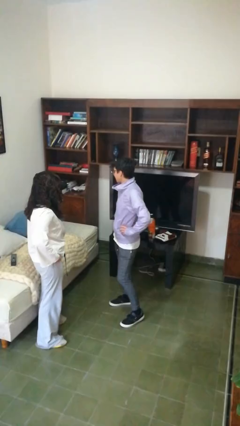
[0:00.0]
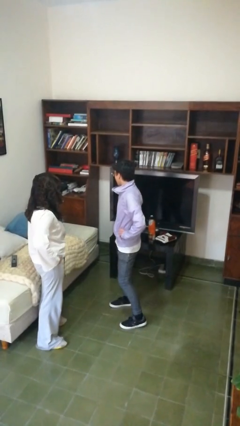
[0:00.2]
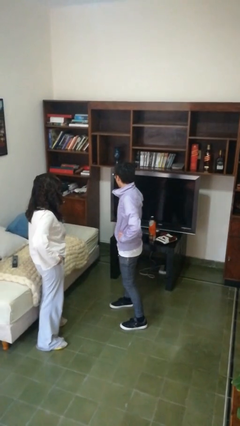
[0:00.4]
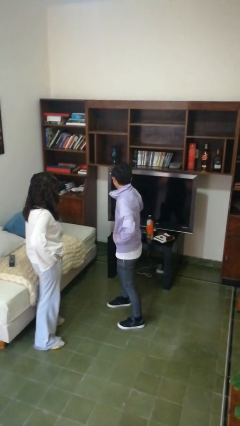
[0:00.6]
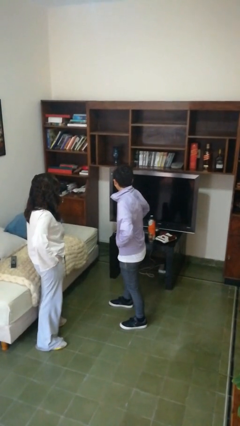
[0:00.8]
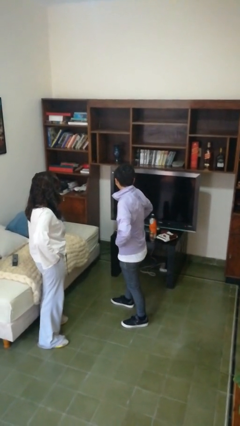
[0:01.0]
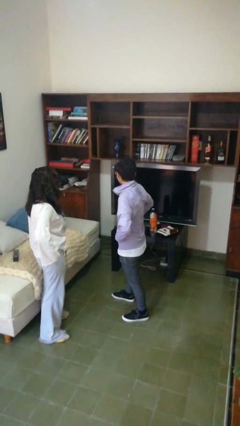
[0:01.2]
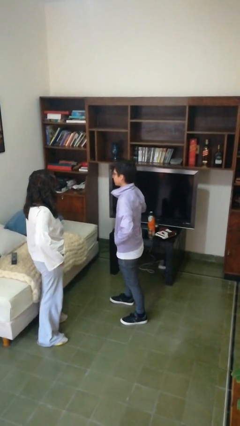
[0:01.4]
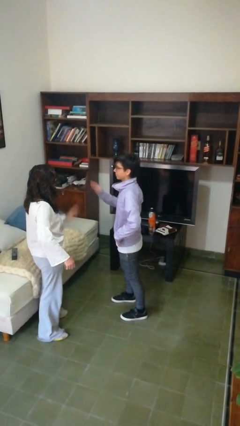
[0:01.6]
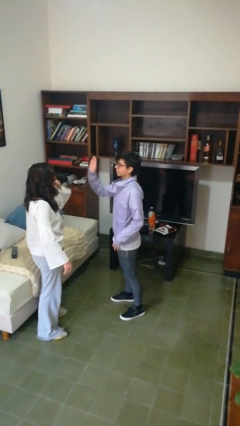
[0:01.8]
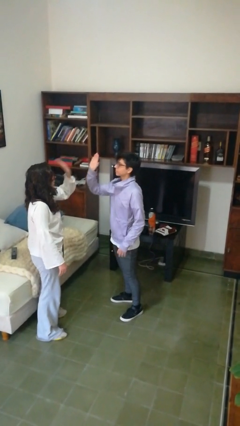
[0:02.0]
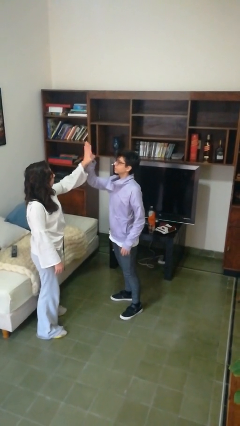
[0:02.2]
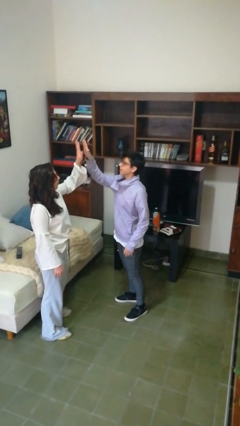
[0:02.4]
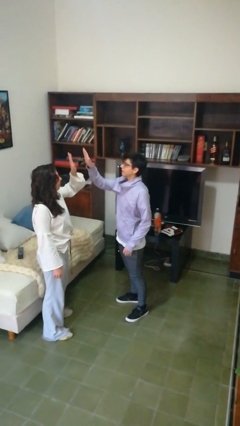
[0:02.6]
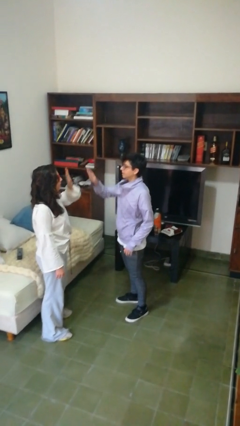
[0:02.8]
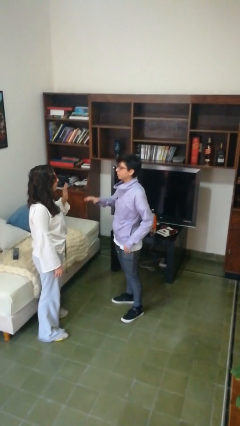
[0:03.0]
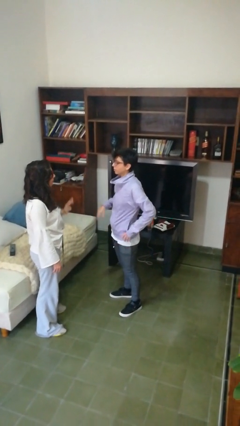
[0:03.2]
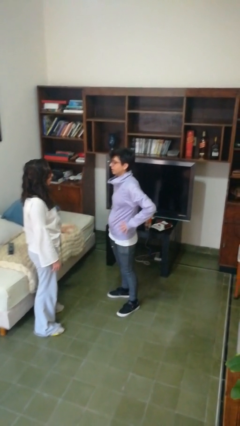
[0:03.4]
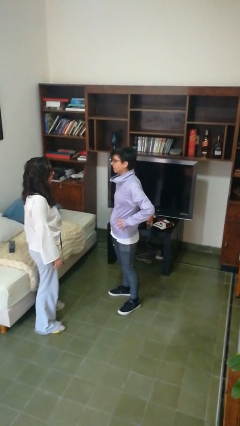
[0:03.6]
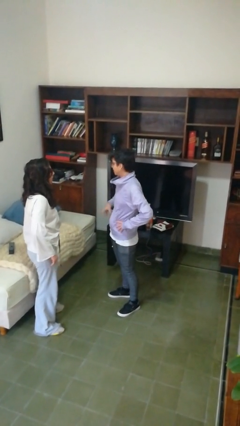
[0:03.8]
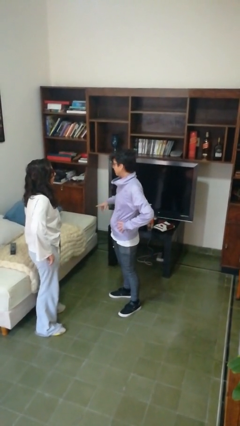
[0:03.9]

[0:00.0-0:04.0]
person highfives hand

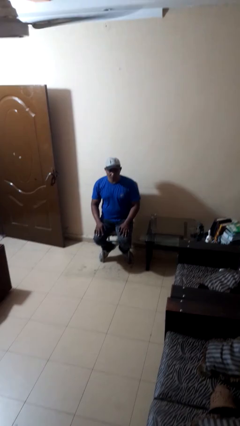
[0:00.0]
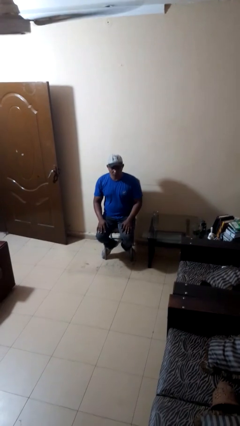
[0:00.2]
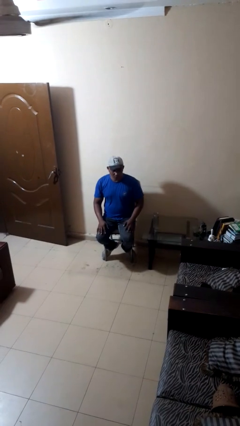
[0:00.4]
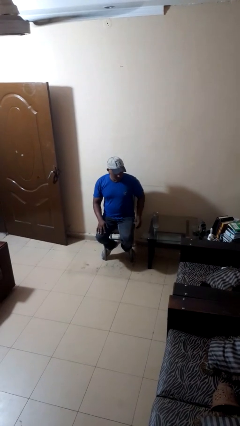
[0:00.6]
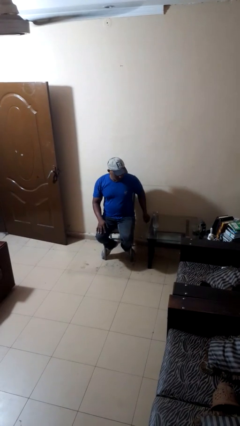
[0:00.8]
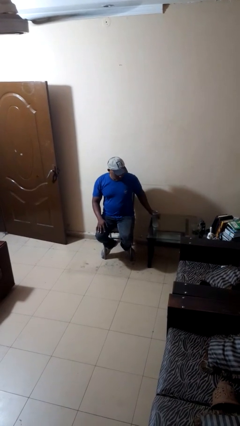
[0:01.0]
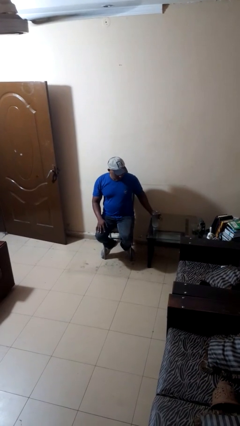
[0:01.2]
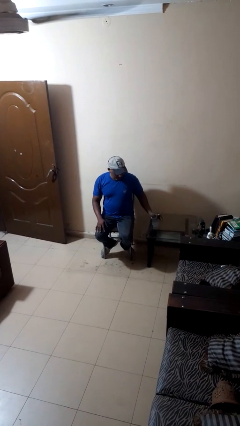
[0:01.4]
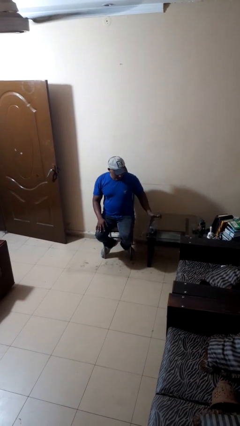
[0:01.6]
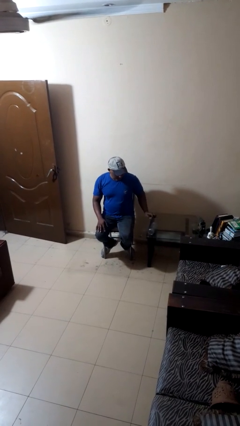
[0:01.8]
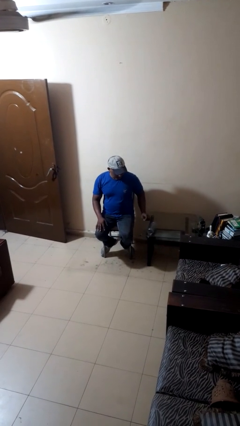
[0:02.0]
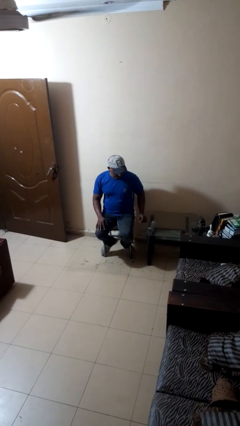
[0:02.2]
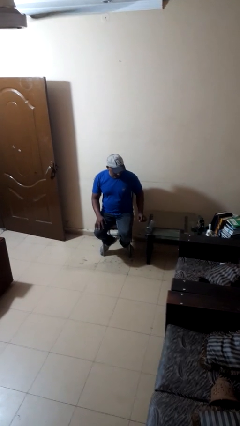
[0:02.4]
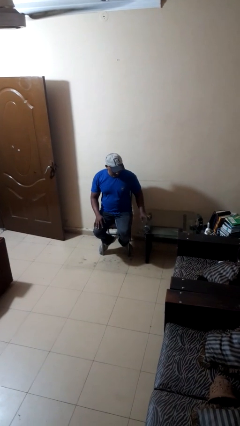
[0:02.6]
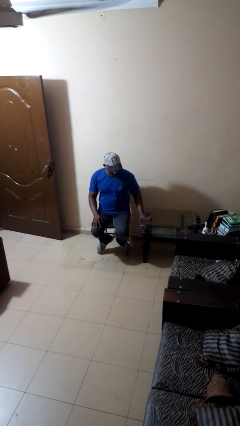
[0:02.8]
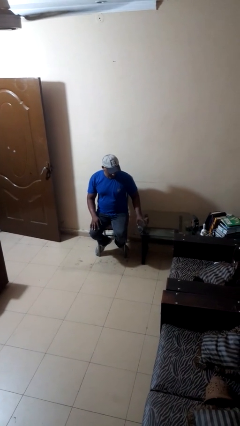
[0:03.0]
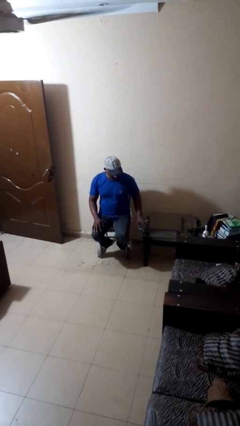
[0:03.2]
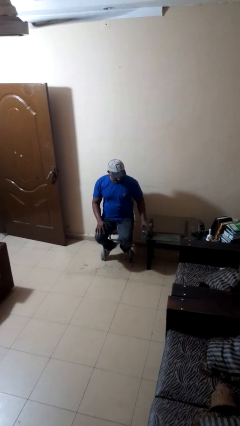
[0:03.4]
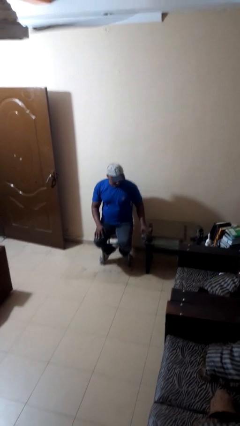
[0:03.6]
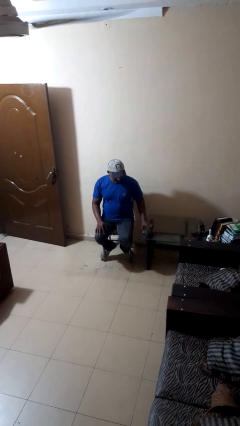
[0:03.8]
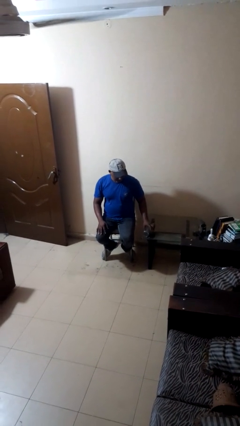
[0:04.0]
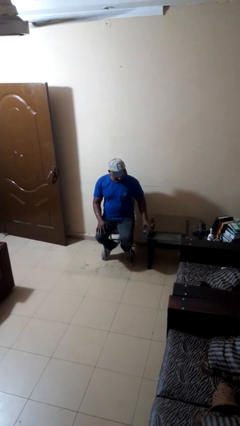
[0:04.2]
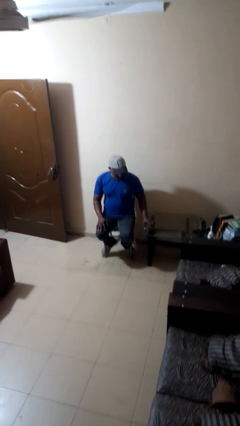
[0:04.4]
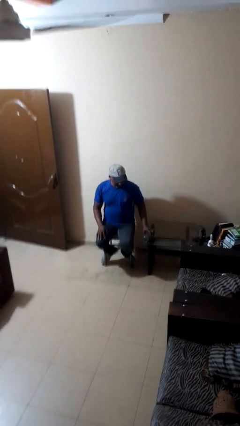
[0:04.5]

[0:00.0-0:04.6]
person spills on table

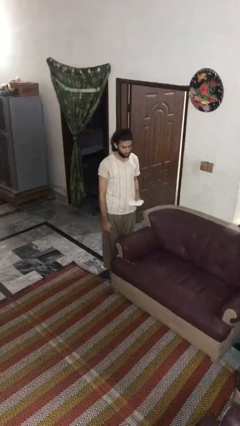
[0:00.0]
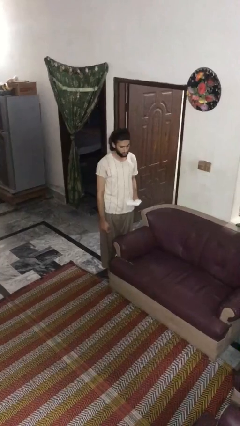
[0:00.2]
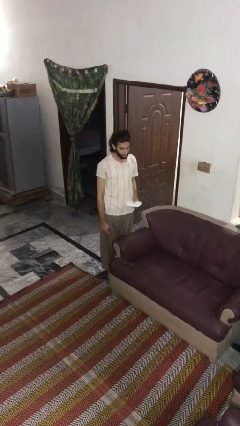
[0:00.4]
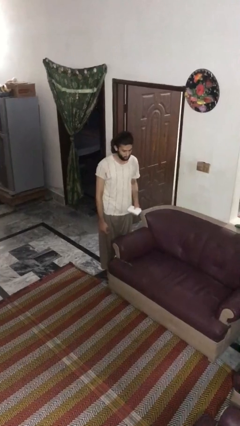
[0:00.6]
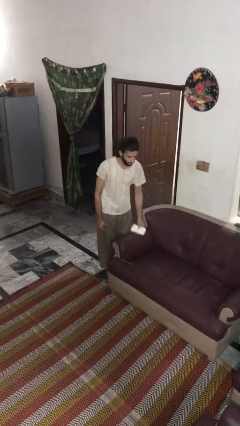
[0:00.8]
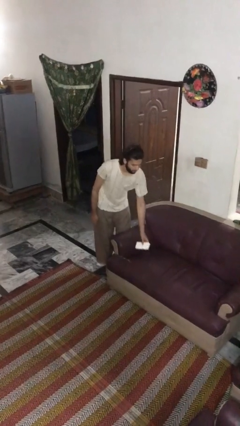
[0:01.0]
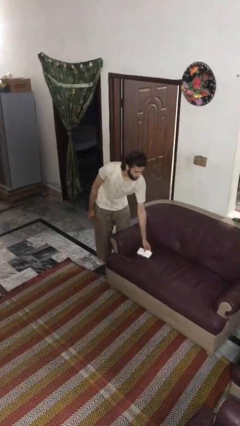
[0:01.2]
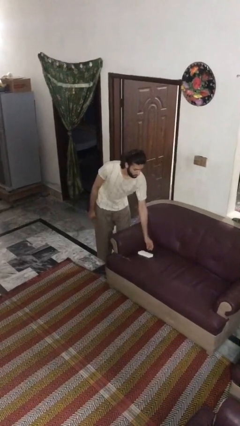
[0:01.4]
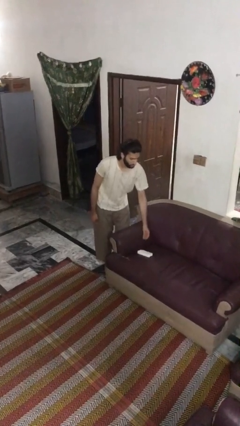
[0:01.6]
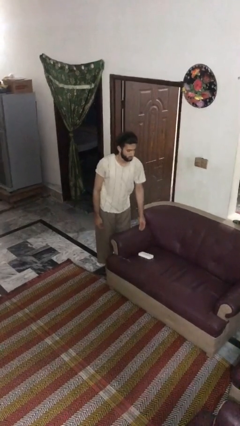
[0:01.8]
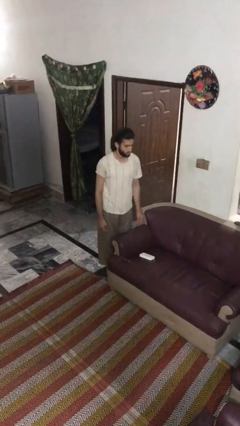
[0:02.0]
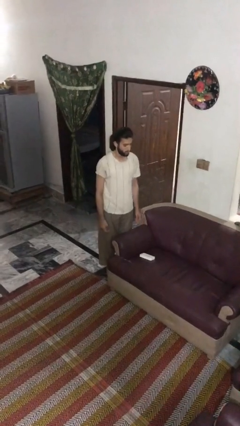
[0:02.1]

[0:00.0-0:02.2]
person puts down object on couch

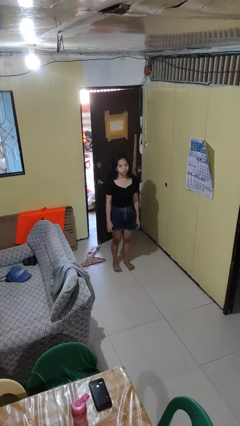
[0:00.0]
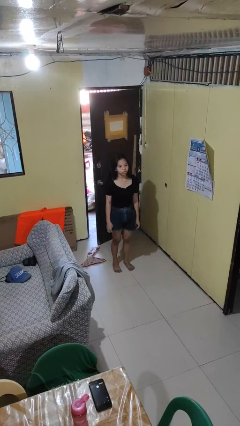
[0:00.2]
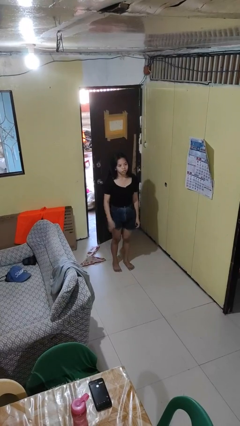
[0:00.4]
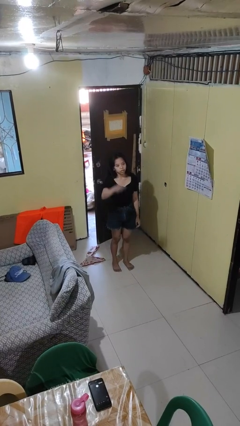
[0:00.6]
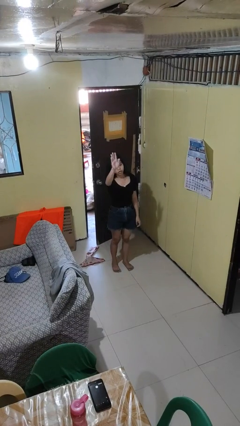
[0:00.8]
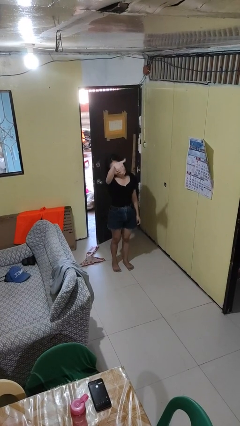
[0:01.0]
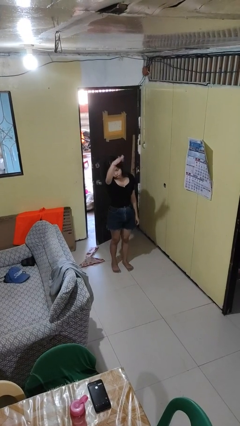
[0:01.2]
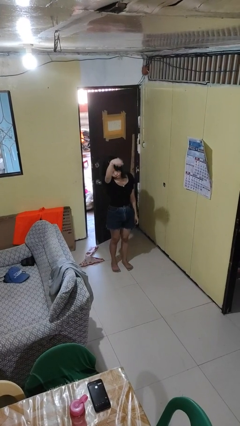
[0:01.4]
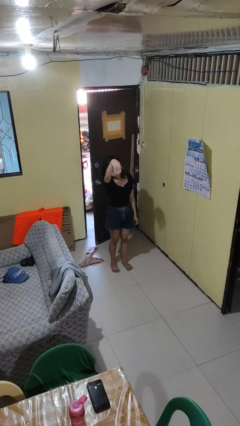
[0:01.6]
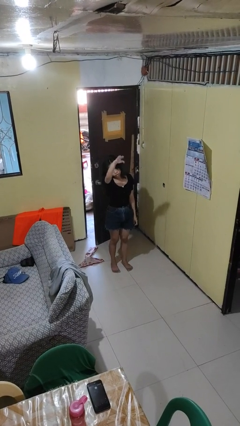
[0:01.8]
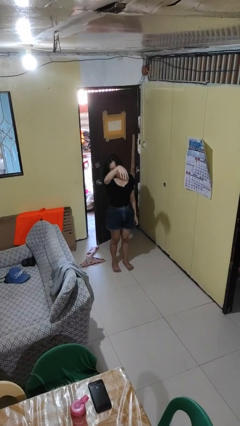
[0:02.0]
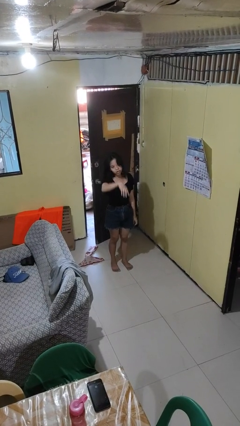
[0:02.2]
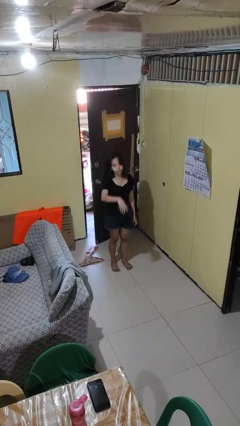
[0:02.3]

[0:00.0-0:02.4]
person gestures come here

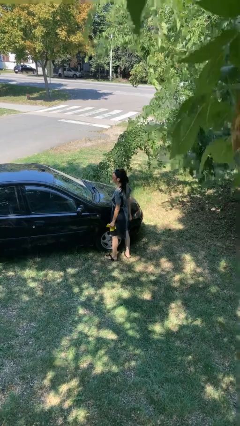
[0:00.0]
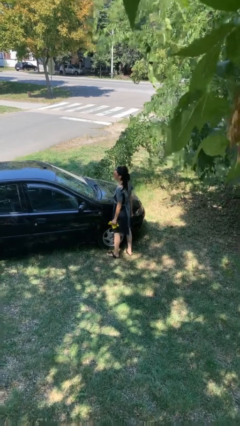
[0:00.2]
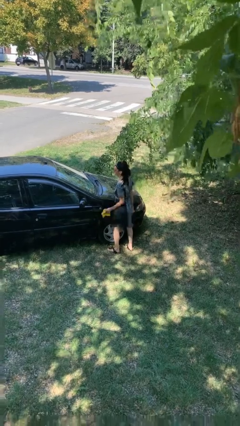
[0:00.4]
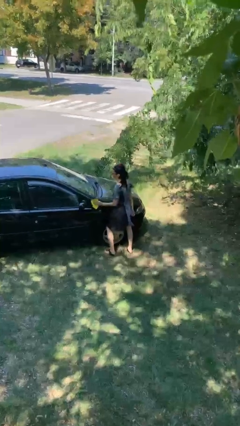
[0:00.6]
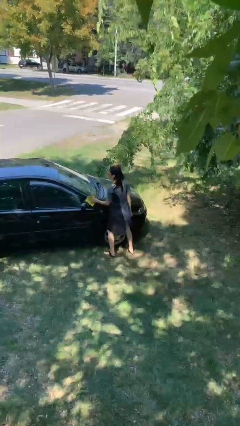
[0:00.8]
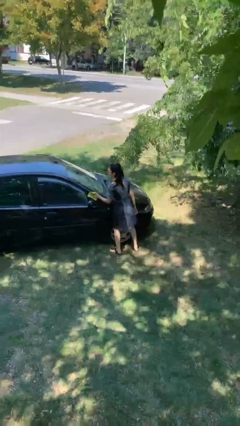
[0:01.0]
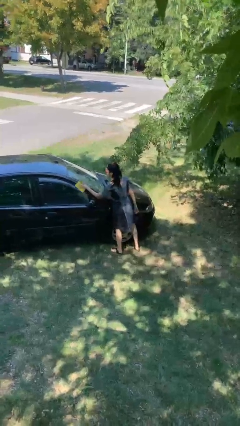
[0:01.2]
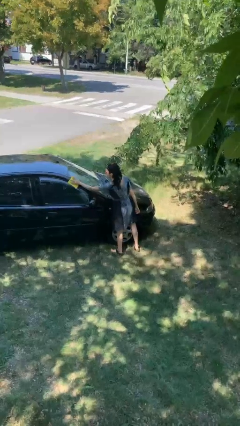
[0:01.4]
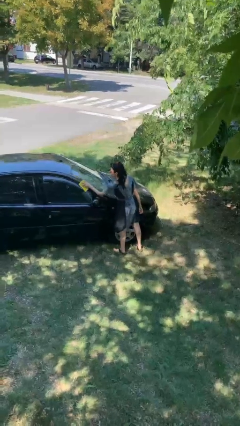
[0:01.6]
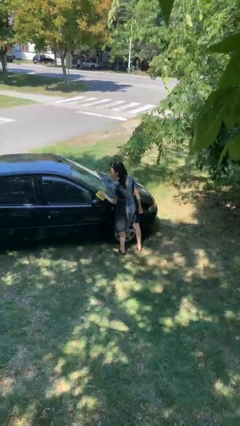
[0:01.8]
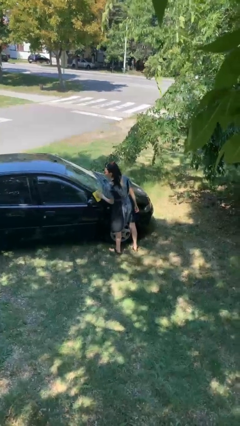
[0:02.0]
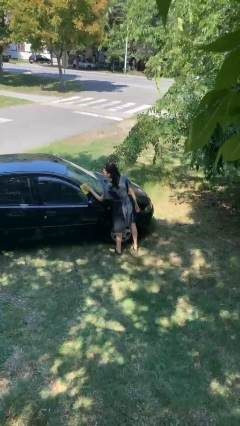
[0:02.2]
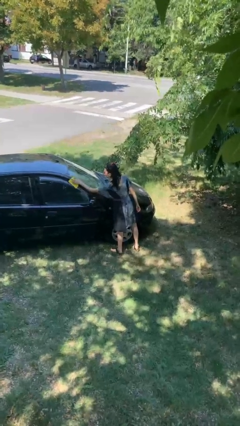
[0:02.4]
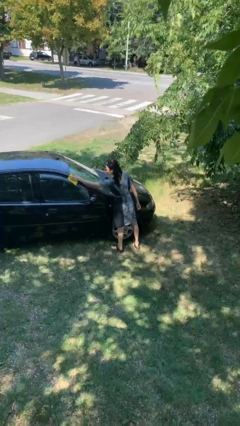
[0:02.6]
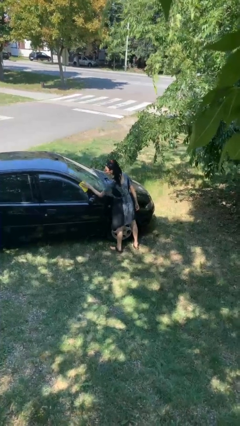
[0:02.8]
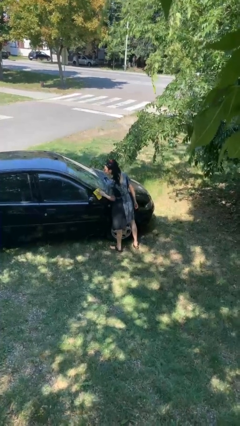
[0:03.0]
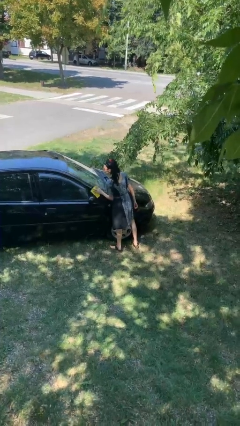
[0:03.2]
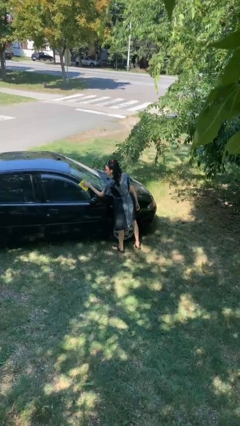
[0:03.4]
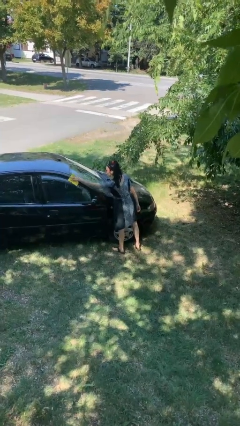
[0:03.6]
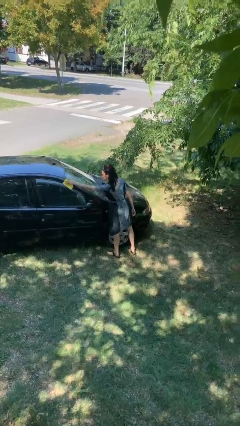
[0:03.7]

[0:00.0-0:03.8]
person polishes car with rag

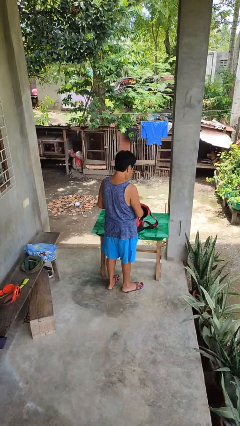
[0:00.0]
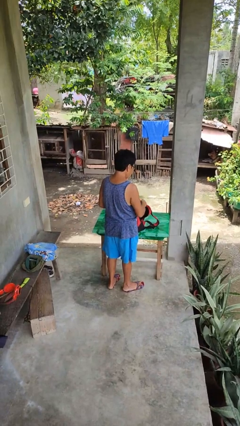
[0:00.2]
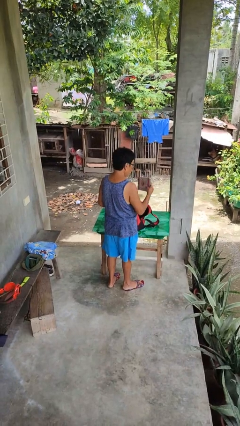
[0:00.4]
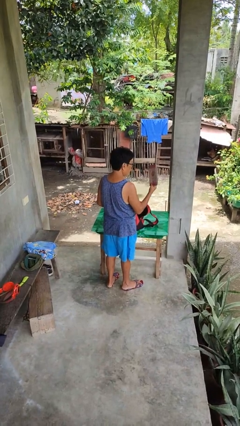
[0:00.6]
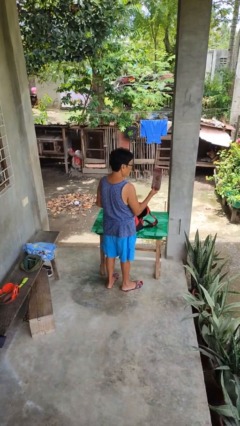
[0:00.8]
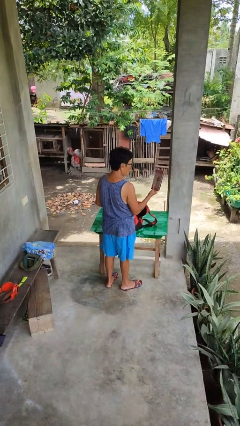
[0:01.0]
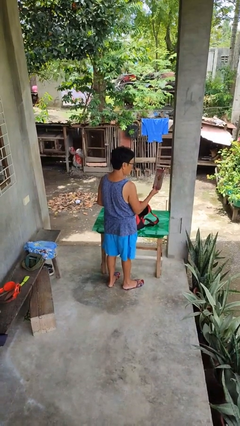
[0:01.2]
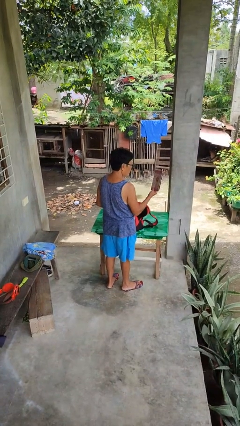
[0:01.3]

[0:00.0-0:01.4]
person takes object from backpack
